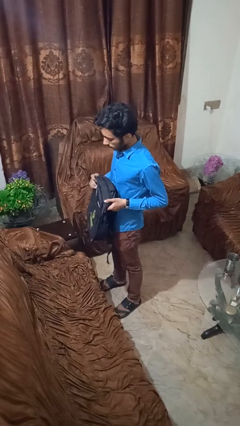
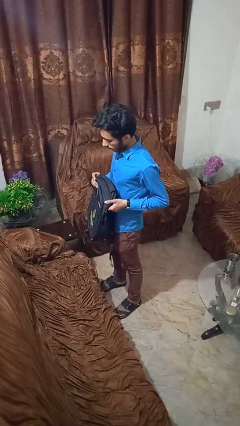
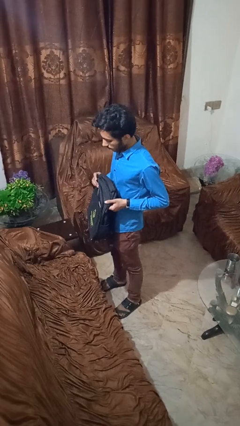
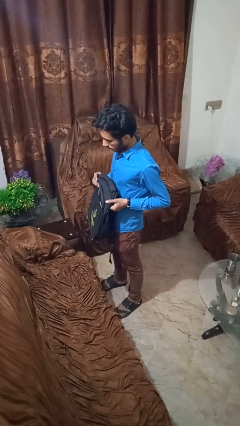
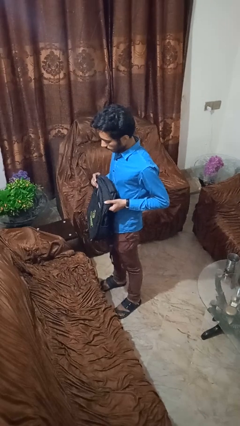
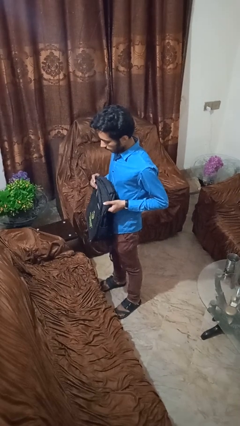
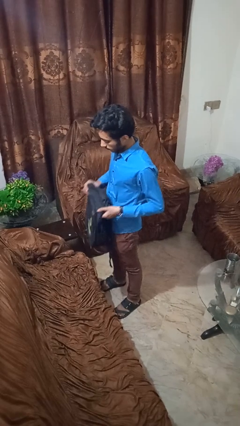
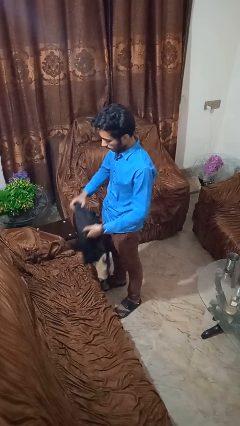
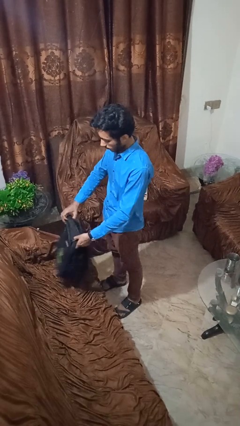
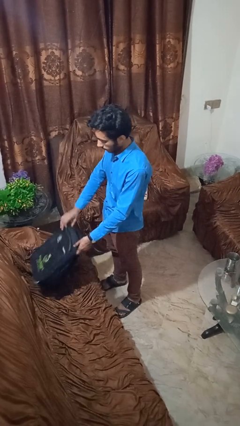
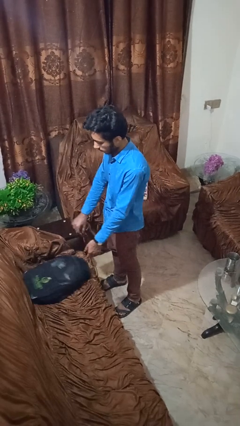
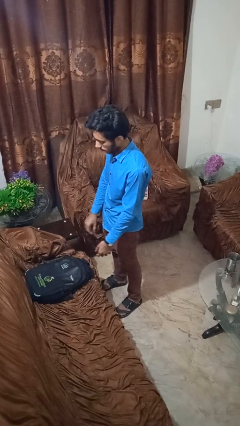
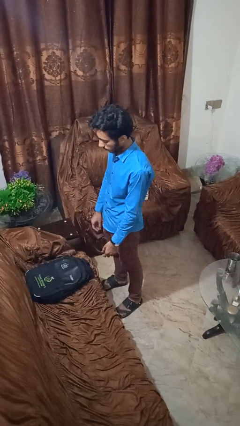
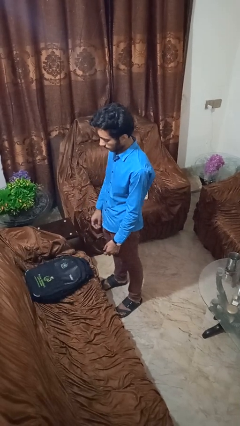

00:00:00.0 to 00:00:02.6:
person puts down object on couch

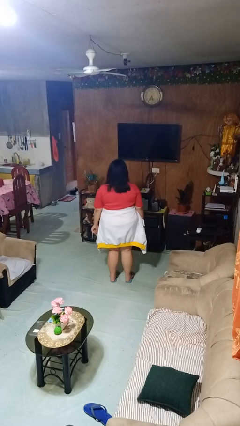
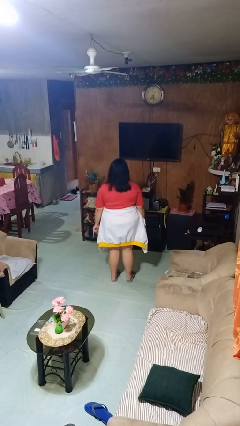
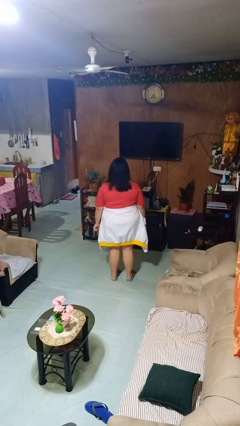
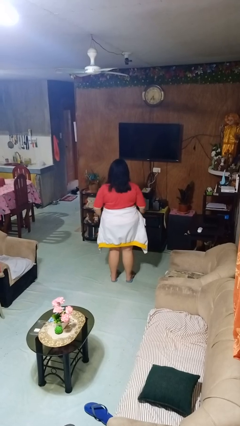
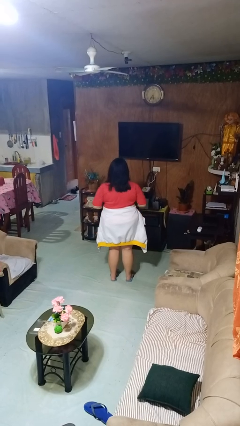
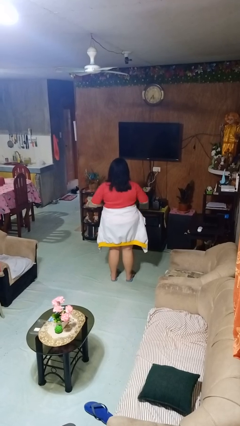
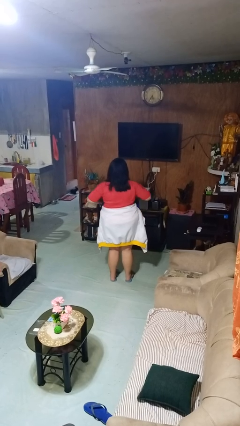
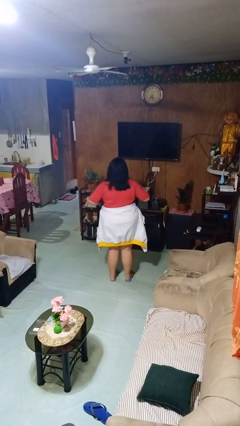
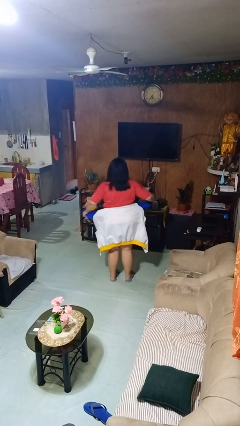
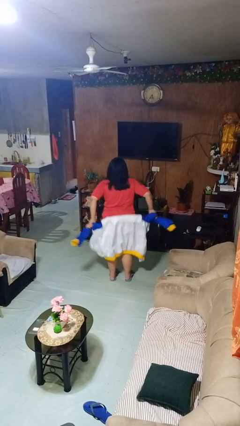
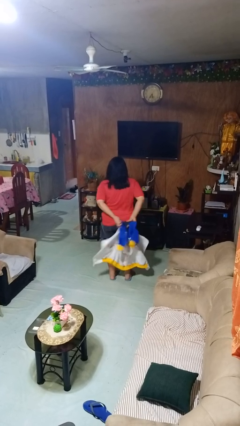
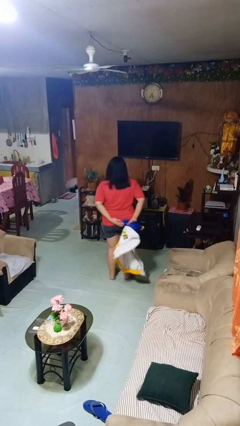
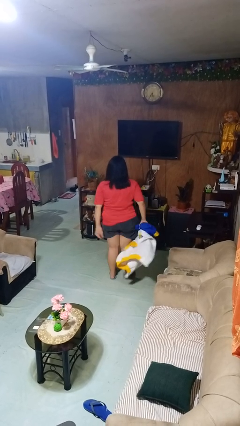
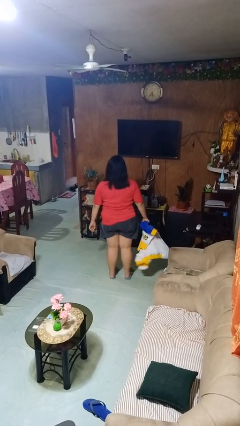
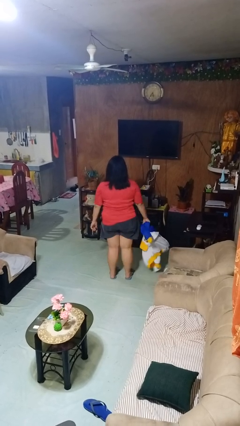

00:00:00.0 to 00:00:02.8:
person unties jacket around waist

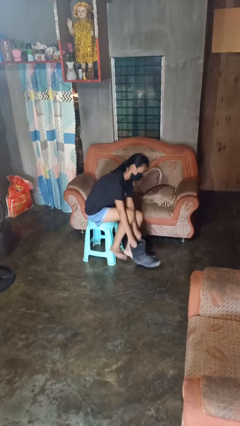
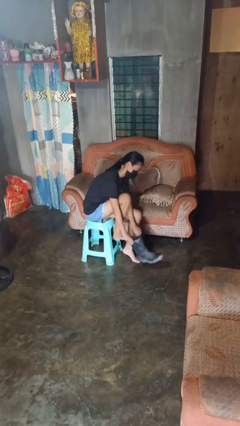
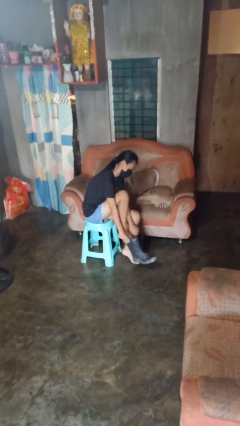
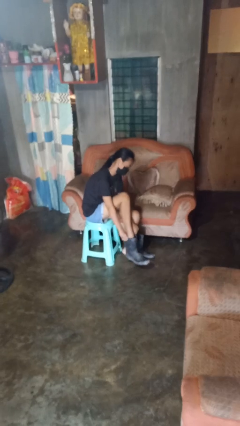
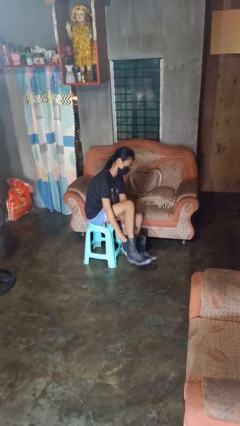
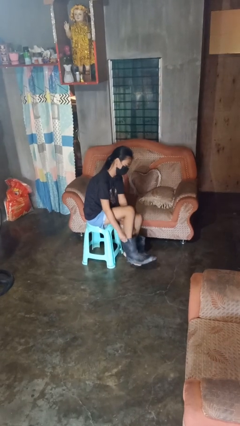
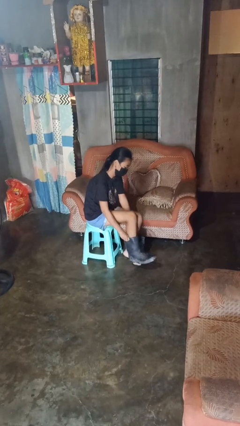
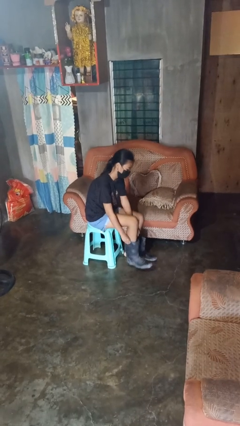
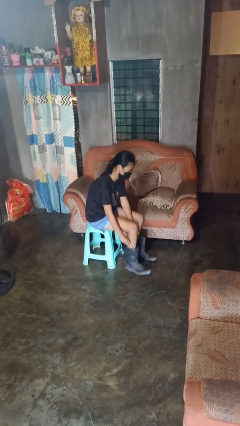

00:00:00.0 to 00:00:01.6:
person puts on boots

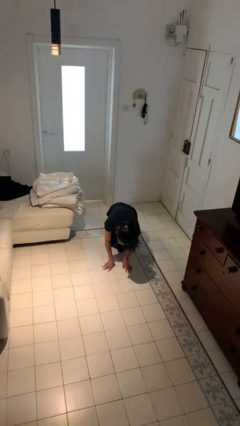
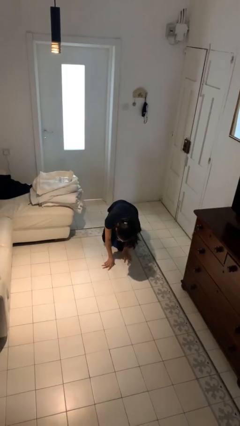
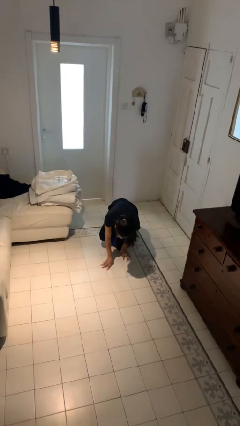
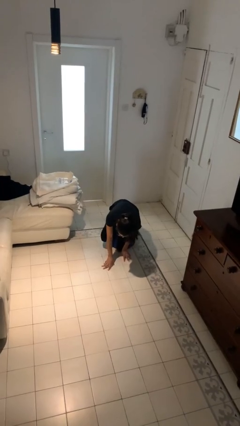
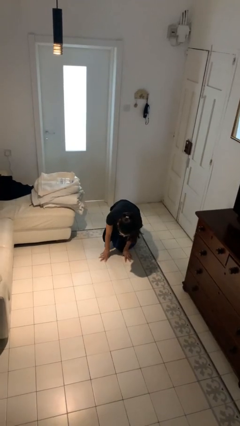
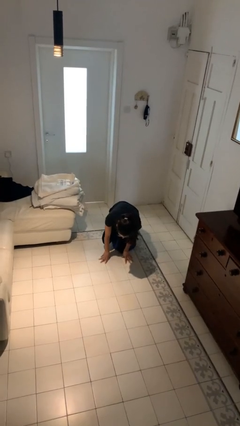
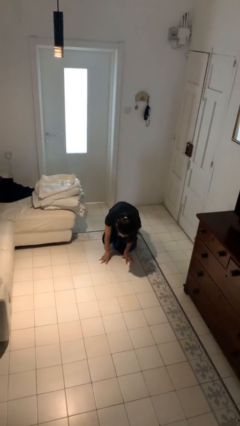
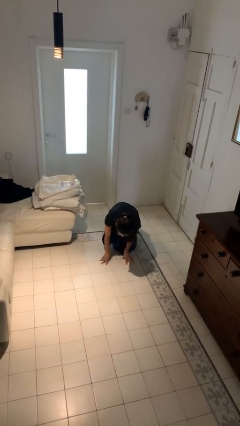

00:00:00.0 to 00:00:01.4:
person lies down on floor

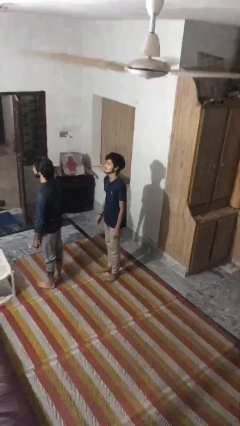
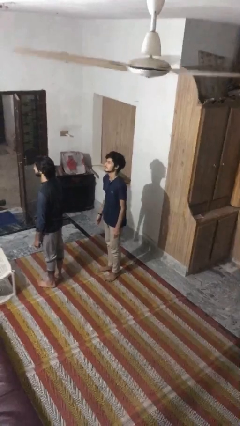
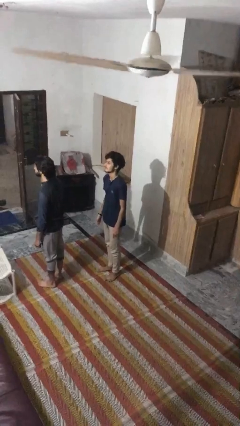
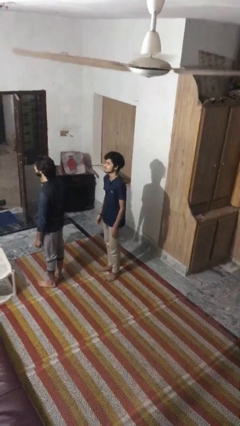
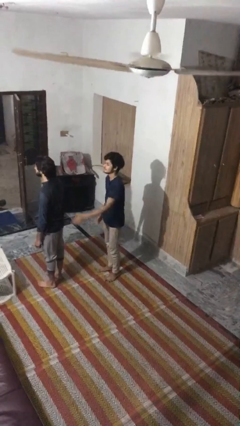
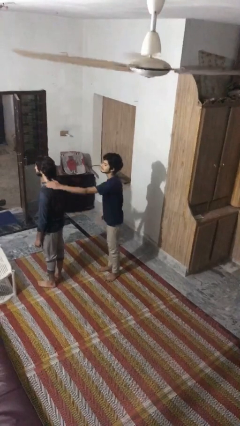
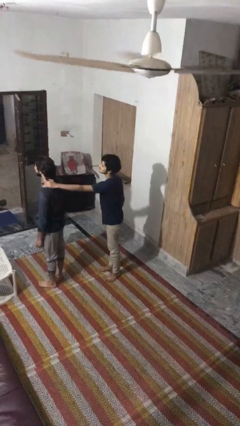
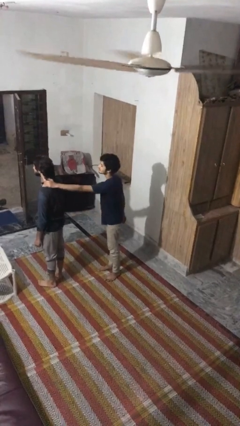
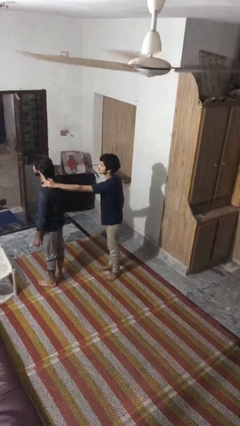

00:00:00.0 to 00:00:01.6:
person grabs person by shoulder

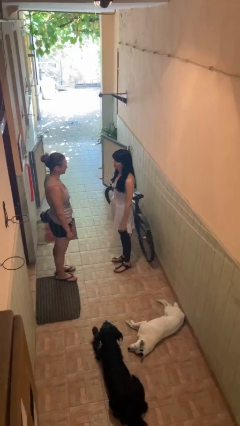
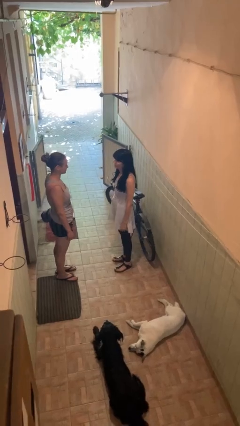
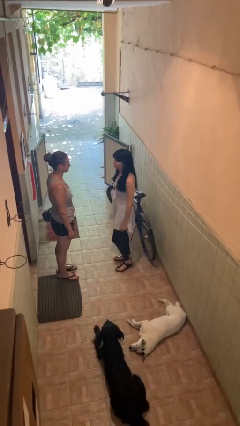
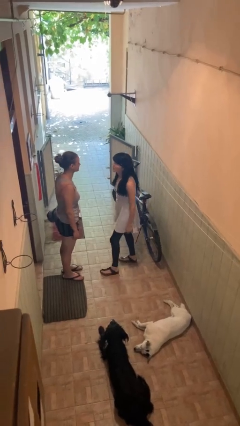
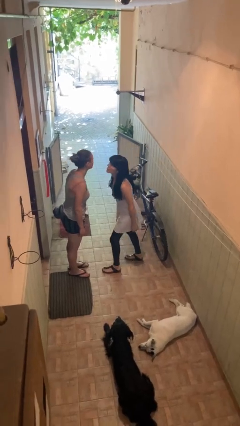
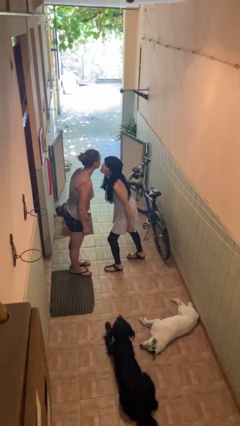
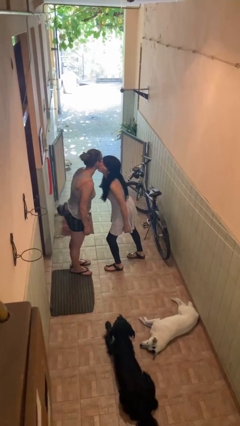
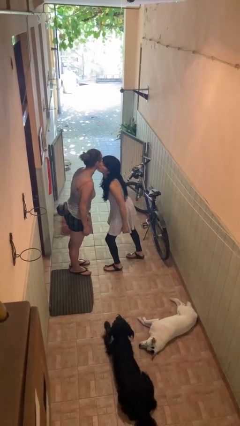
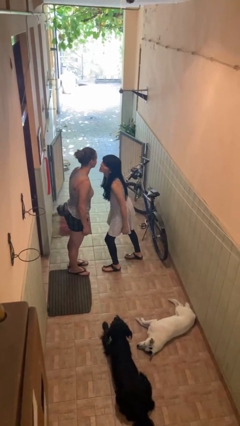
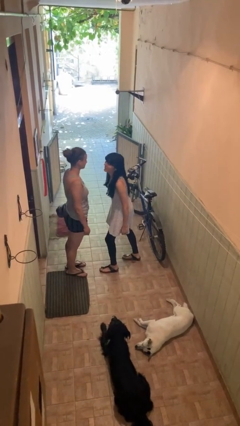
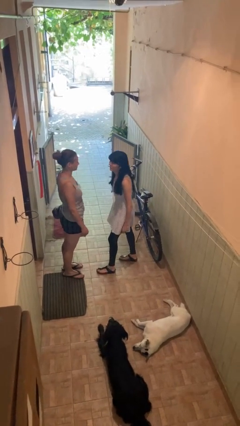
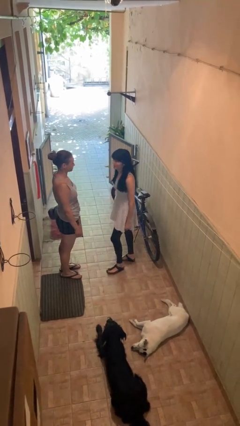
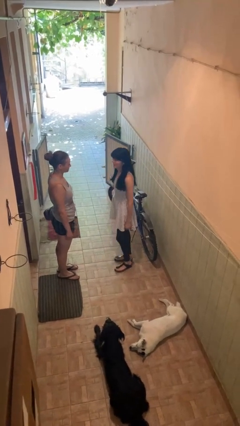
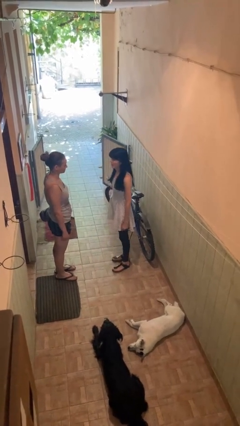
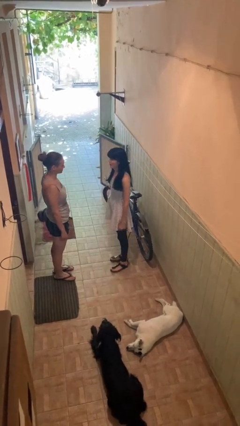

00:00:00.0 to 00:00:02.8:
person kisses cheek of person

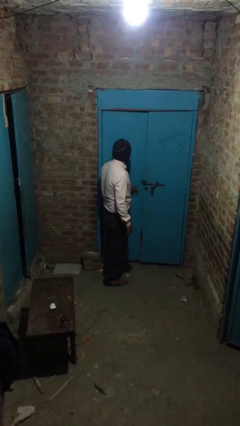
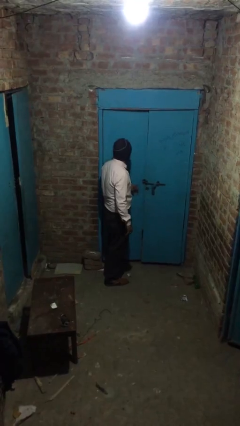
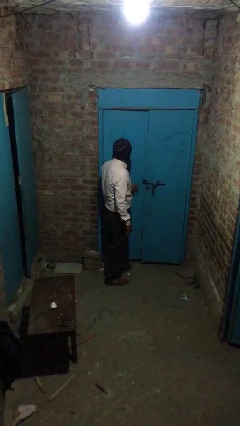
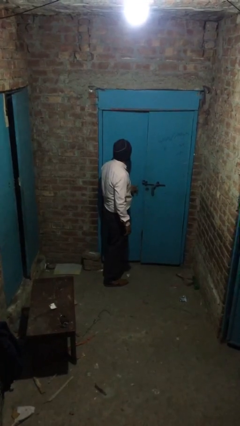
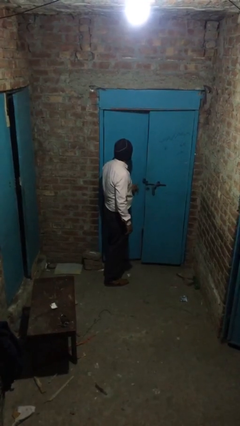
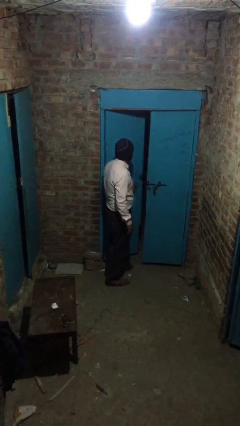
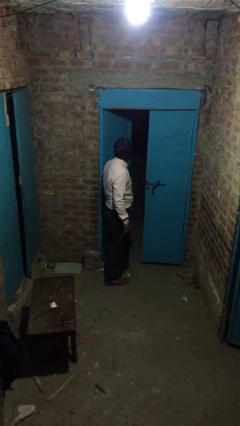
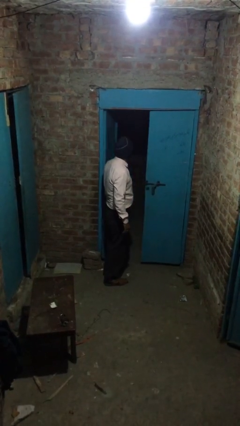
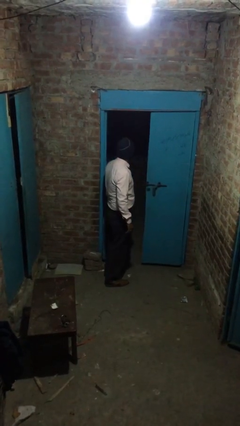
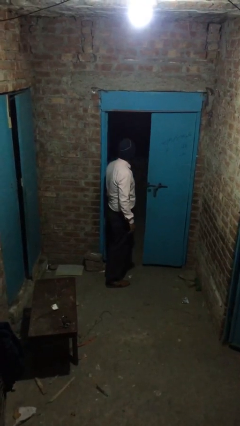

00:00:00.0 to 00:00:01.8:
person opens facility door

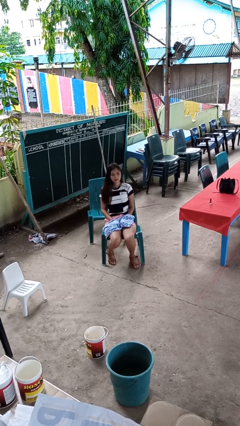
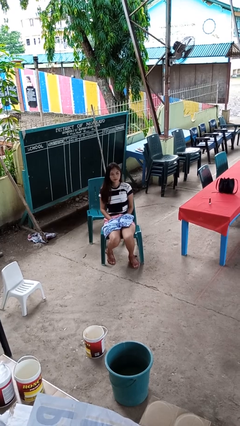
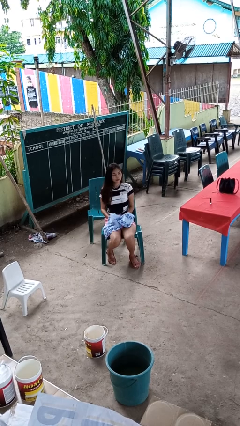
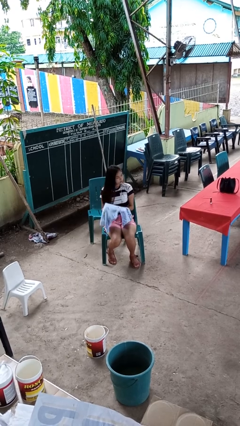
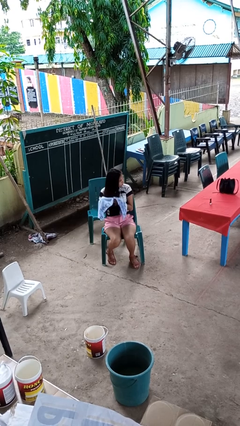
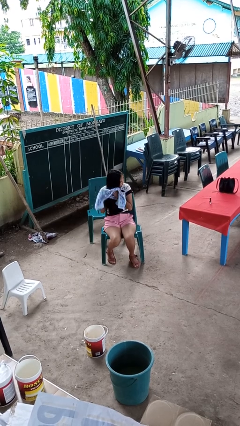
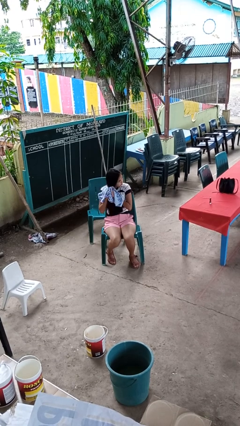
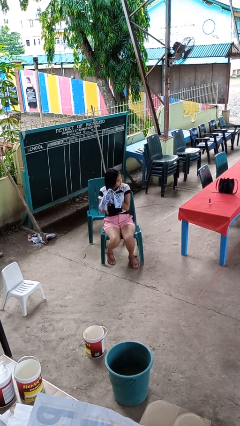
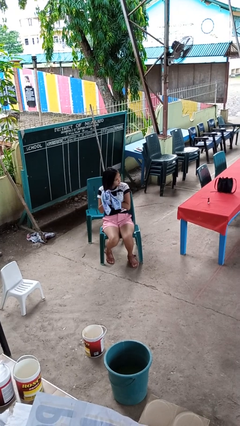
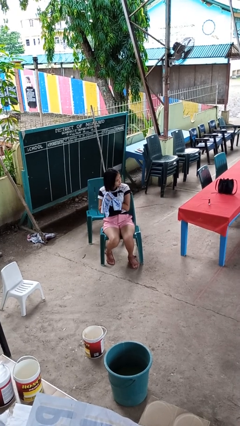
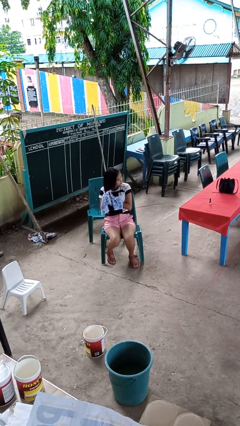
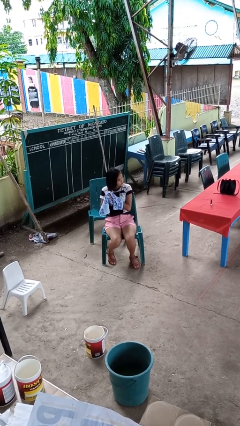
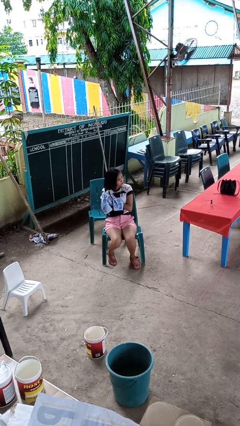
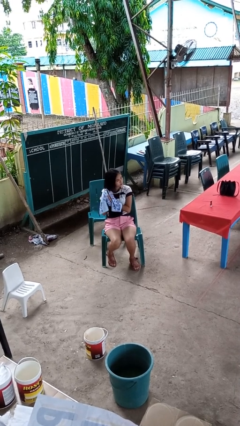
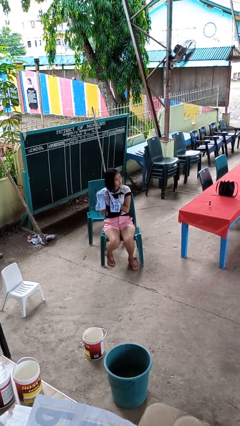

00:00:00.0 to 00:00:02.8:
person dries hair with towel
